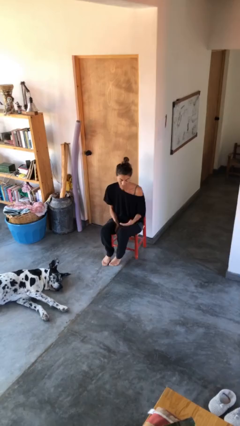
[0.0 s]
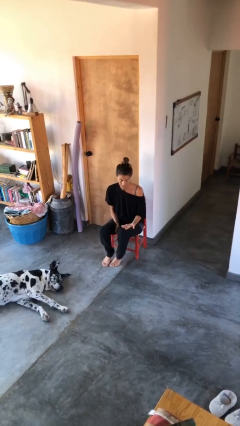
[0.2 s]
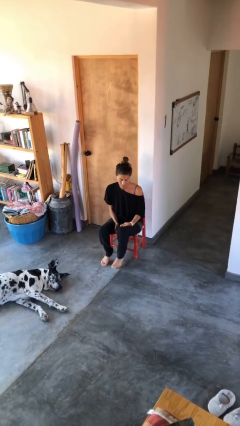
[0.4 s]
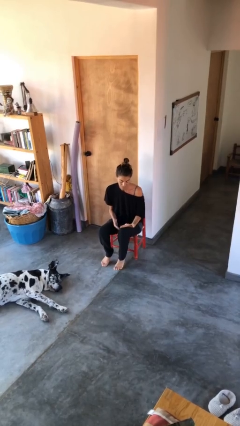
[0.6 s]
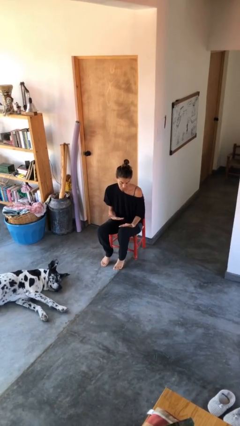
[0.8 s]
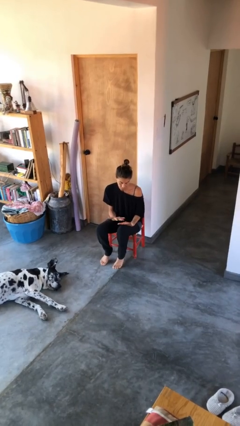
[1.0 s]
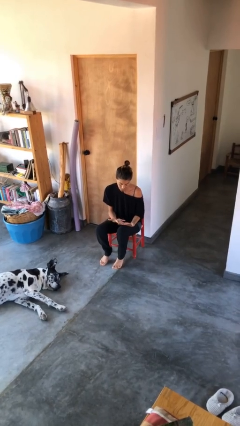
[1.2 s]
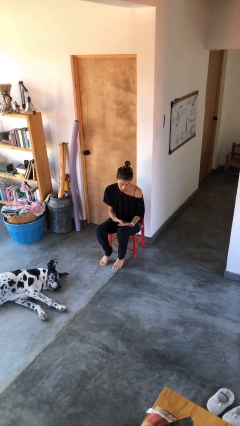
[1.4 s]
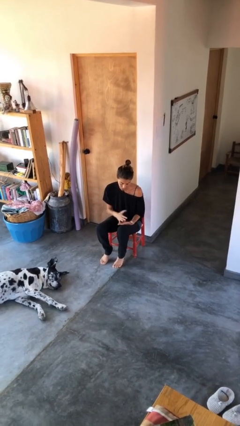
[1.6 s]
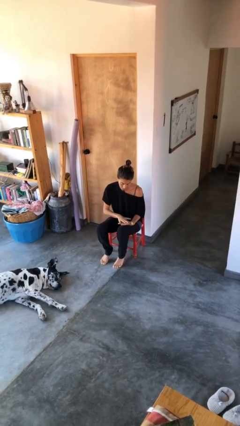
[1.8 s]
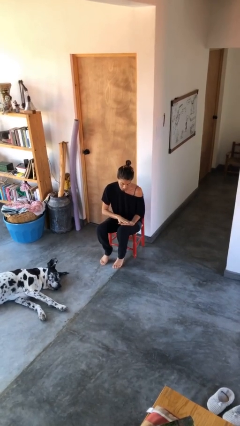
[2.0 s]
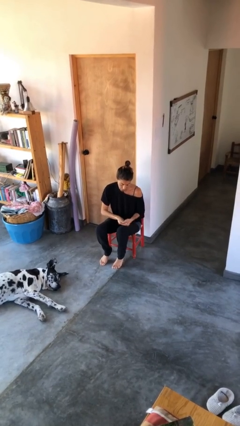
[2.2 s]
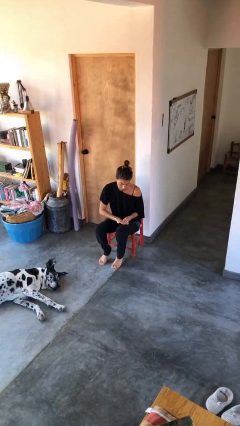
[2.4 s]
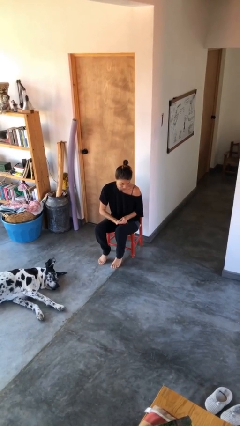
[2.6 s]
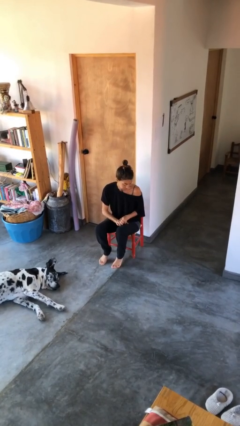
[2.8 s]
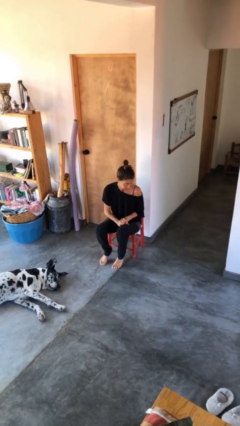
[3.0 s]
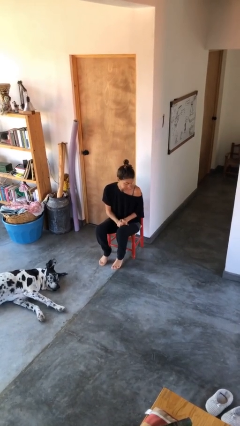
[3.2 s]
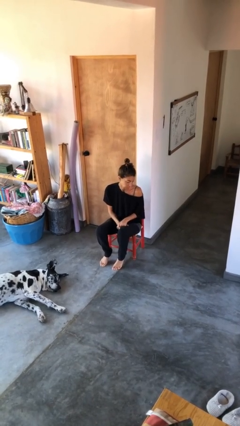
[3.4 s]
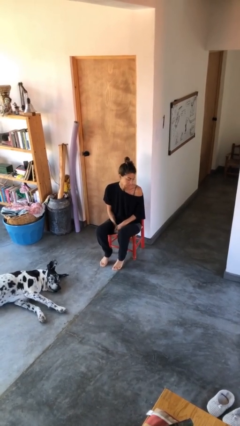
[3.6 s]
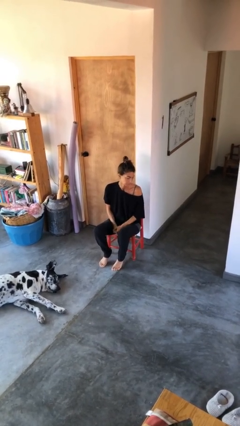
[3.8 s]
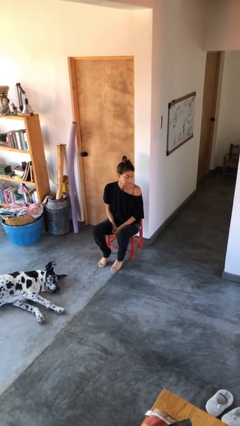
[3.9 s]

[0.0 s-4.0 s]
person looks at hands in lap

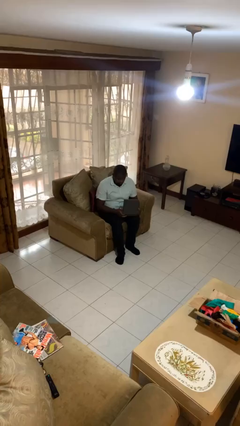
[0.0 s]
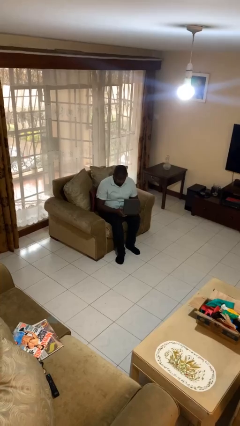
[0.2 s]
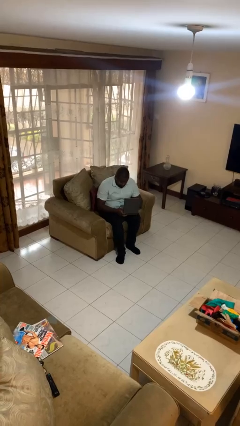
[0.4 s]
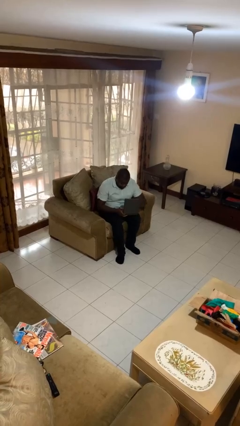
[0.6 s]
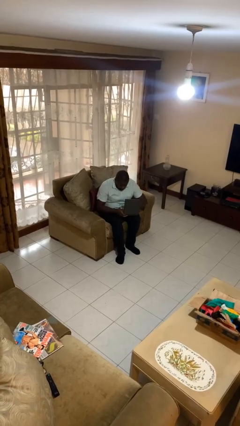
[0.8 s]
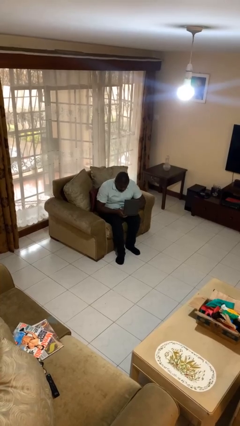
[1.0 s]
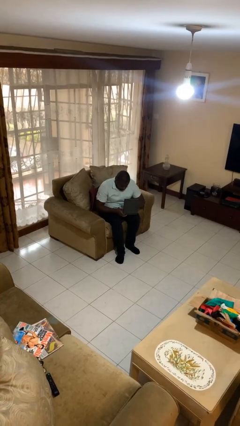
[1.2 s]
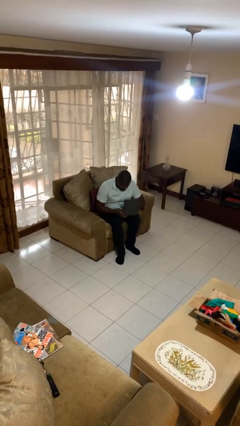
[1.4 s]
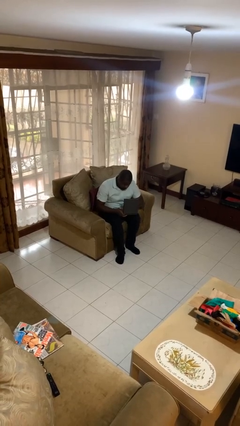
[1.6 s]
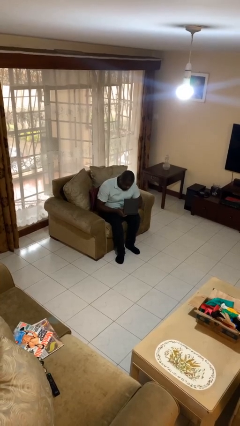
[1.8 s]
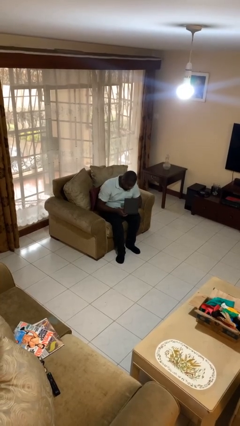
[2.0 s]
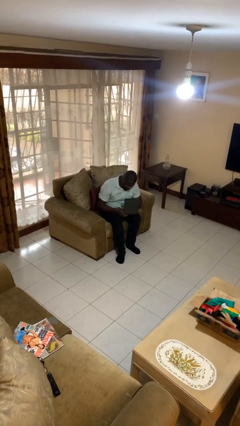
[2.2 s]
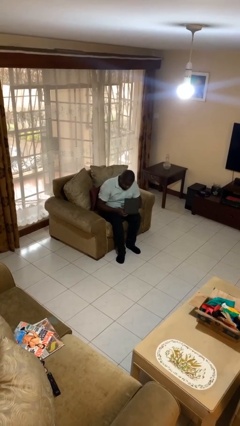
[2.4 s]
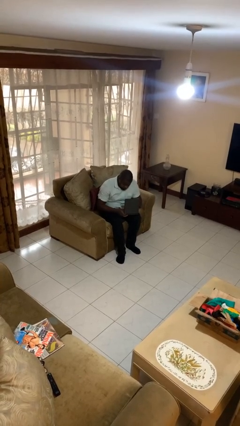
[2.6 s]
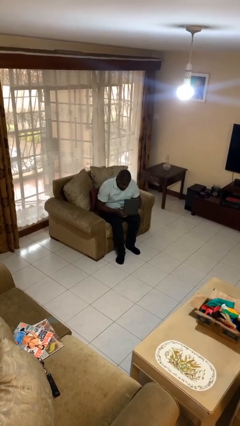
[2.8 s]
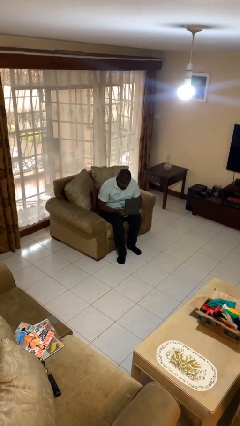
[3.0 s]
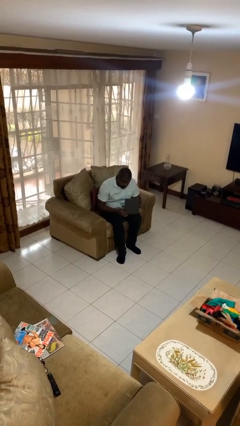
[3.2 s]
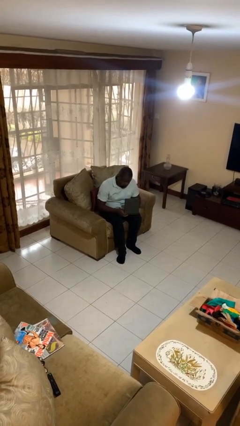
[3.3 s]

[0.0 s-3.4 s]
person searches jewelry box

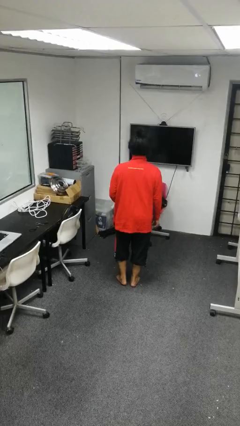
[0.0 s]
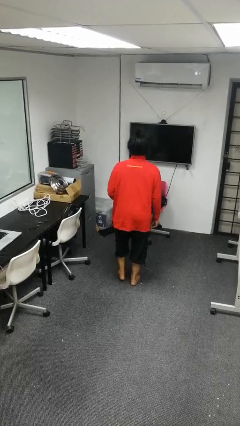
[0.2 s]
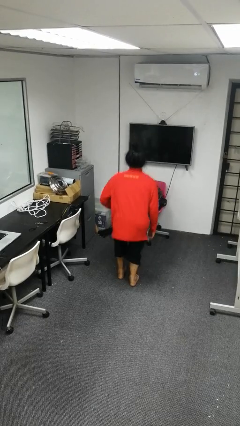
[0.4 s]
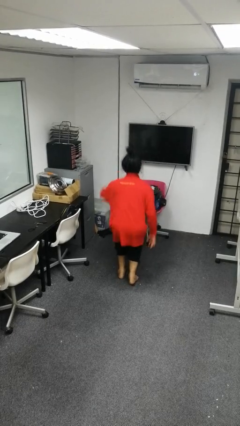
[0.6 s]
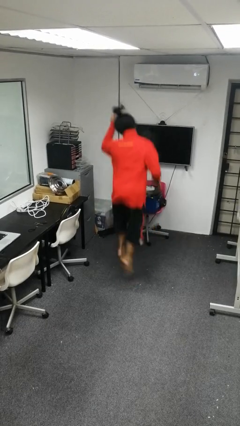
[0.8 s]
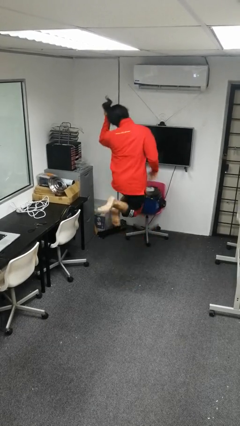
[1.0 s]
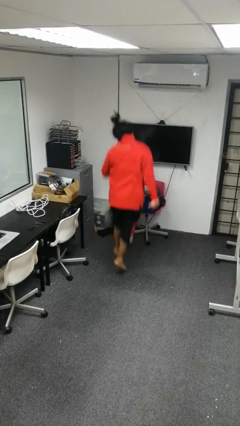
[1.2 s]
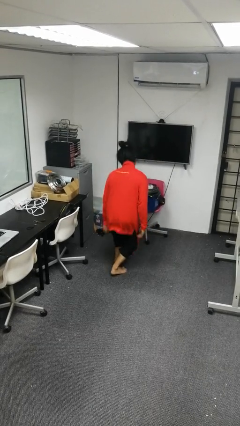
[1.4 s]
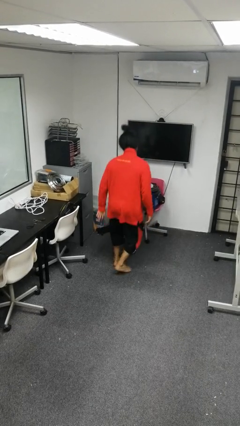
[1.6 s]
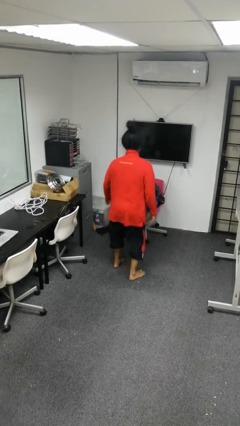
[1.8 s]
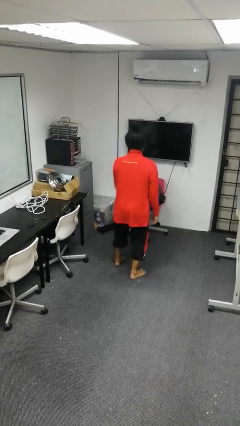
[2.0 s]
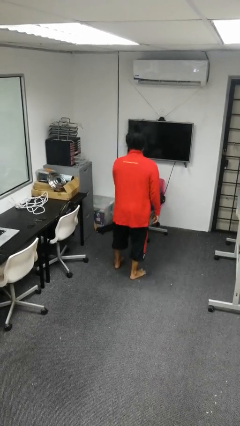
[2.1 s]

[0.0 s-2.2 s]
person jumps

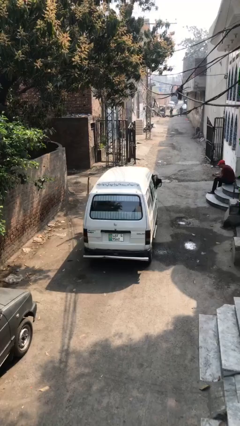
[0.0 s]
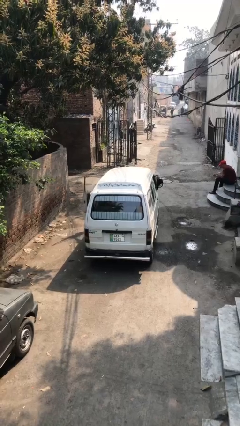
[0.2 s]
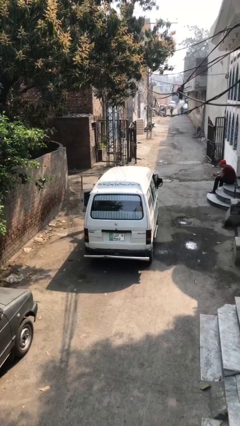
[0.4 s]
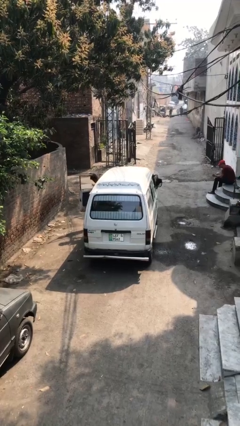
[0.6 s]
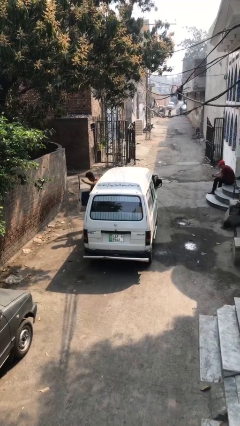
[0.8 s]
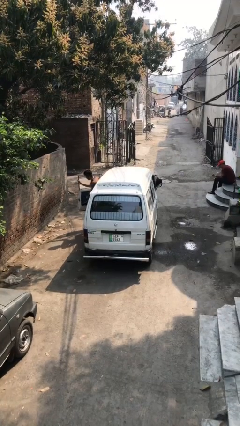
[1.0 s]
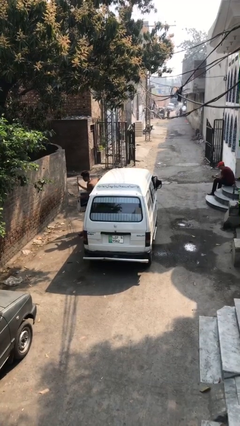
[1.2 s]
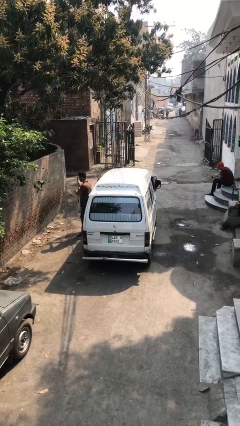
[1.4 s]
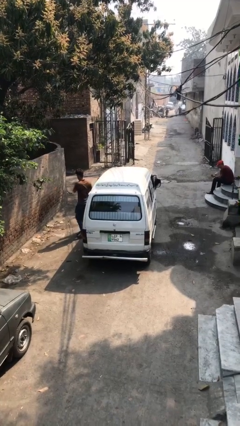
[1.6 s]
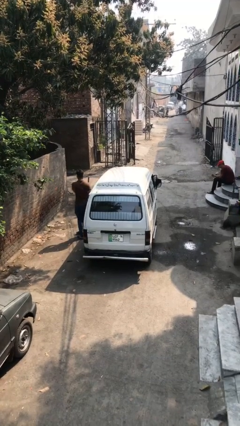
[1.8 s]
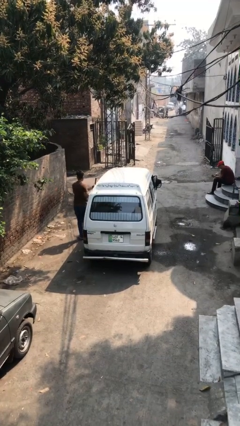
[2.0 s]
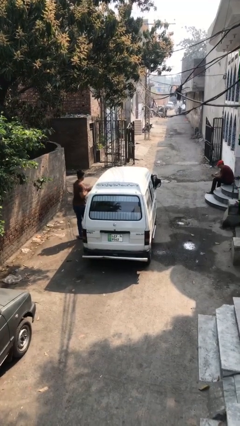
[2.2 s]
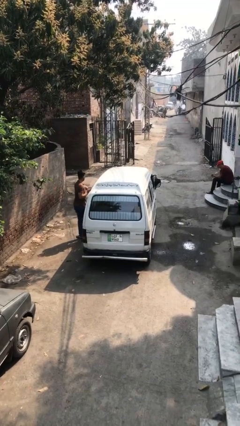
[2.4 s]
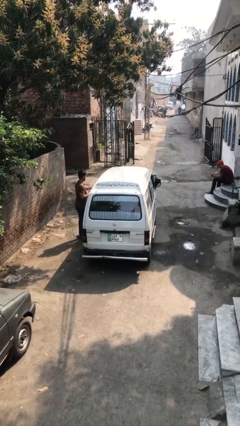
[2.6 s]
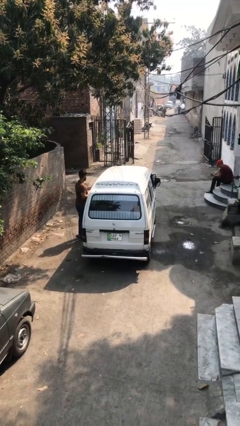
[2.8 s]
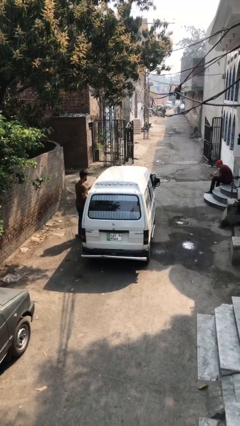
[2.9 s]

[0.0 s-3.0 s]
car drops off person

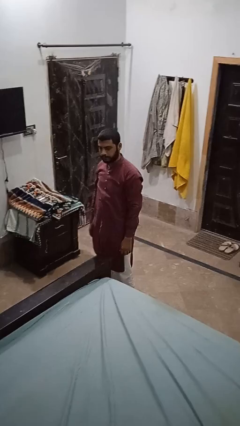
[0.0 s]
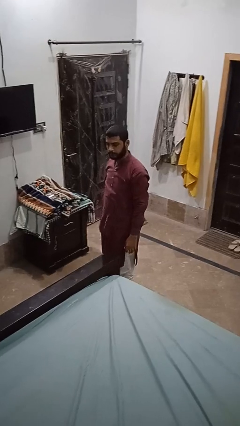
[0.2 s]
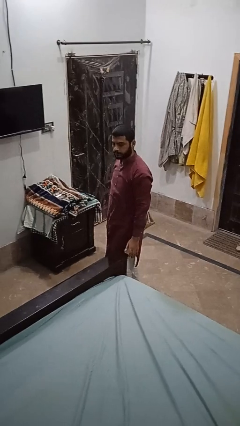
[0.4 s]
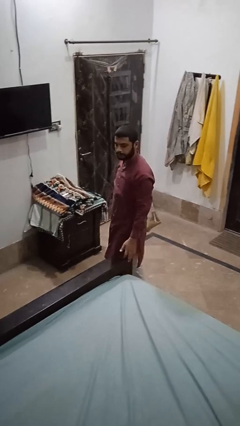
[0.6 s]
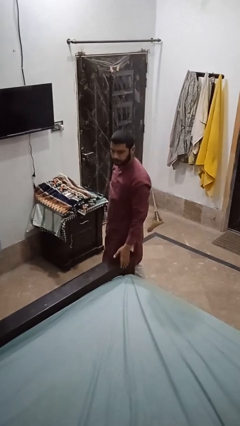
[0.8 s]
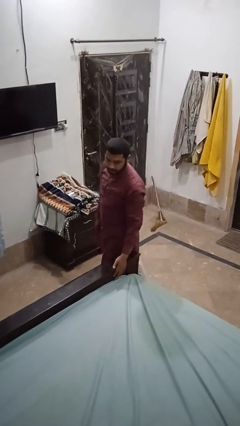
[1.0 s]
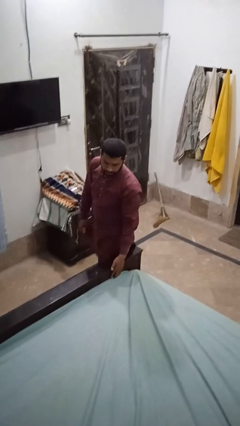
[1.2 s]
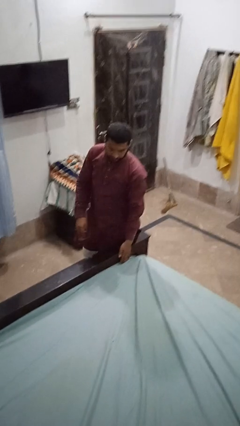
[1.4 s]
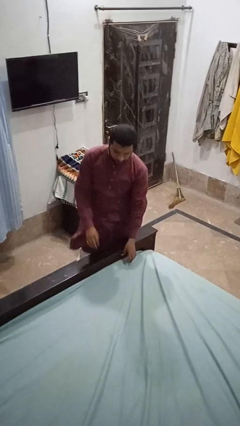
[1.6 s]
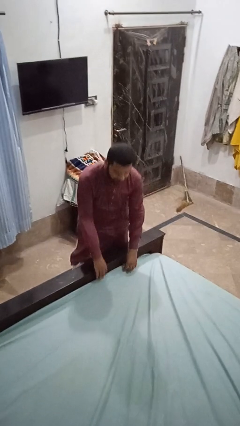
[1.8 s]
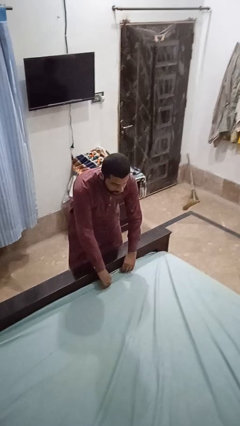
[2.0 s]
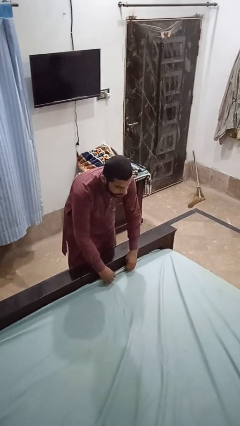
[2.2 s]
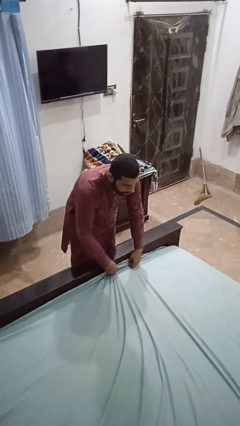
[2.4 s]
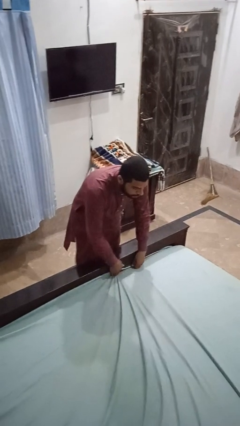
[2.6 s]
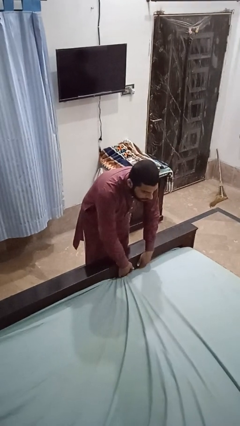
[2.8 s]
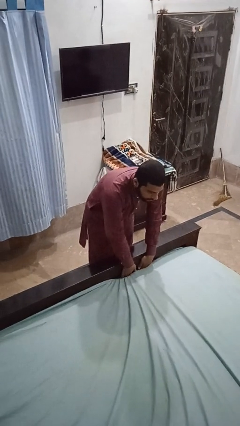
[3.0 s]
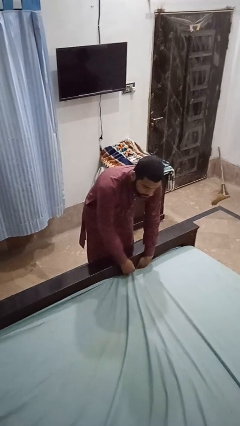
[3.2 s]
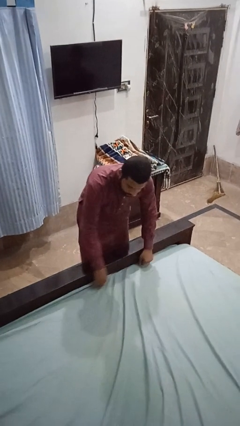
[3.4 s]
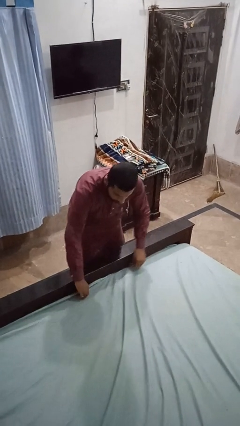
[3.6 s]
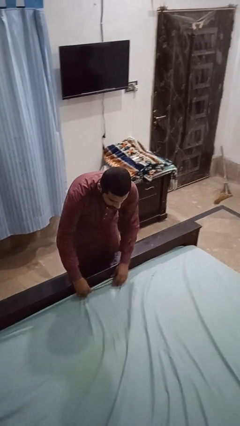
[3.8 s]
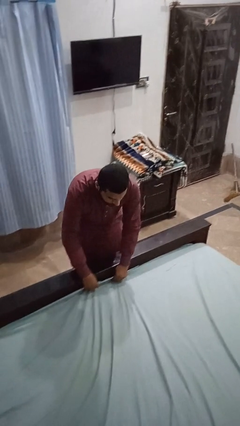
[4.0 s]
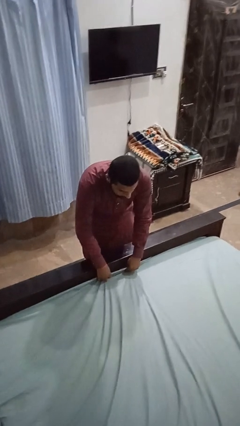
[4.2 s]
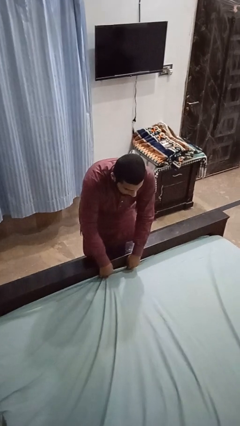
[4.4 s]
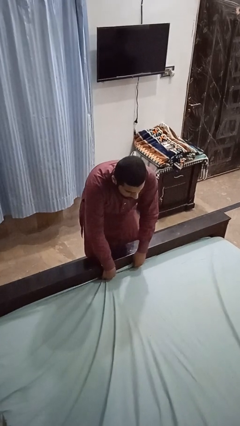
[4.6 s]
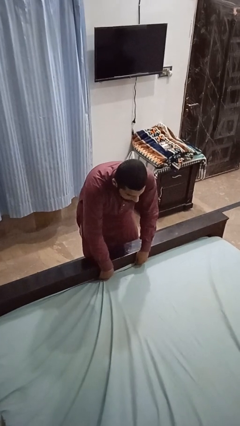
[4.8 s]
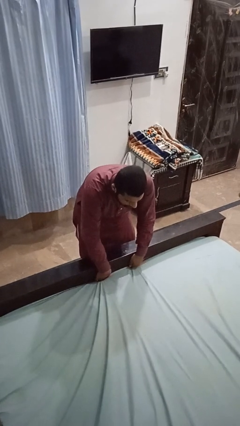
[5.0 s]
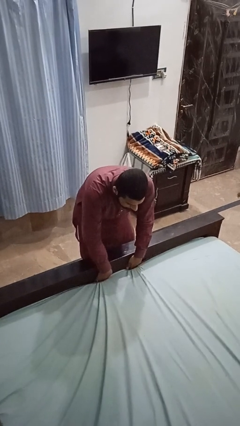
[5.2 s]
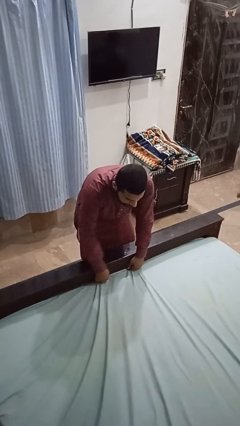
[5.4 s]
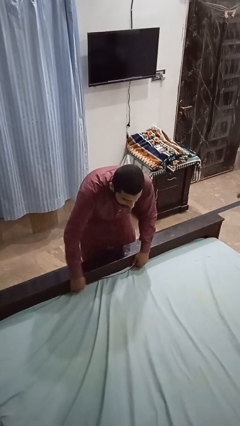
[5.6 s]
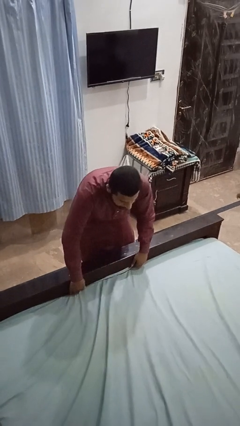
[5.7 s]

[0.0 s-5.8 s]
person makes bed
